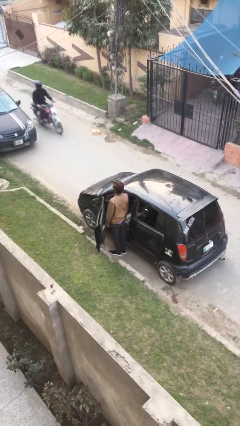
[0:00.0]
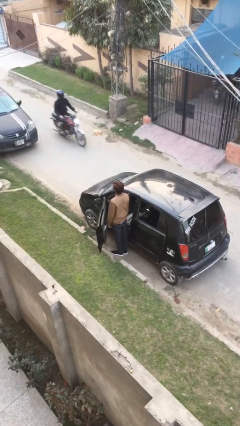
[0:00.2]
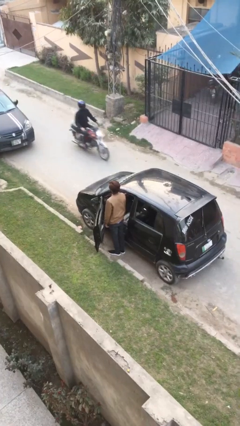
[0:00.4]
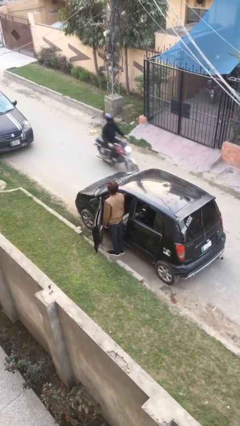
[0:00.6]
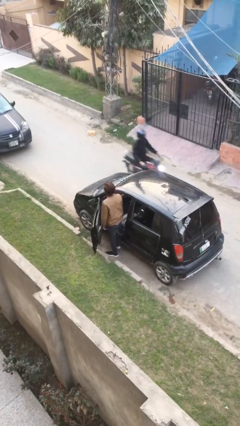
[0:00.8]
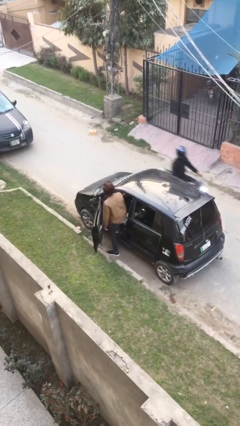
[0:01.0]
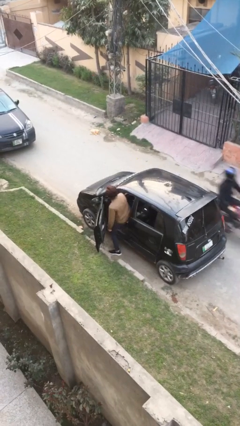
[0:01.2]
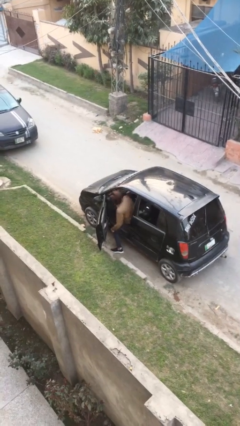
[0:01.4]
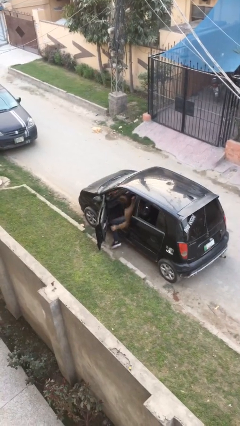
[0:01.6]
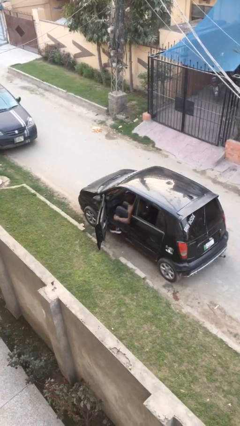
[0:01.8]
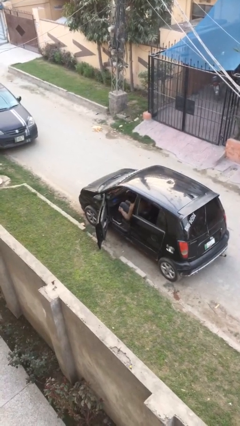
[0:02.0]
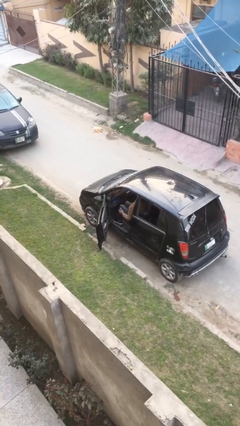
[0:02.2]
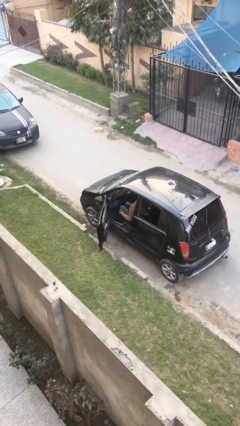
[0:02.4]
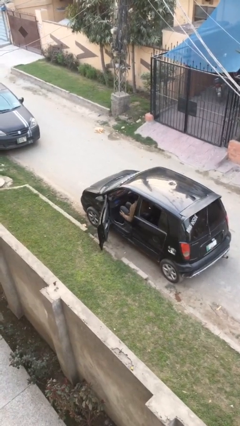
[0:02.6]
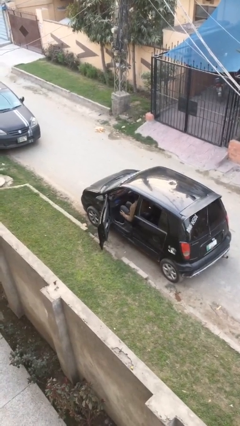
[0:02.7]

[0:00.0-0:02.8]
person enters car

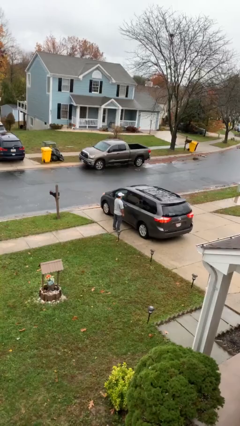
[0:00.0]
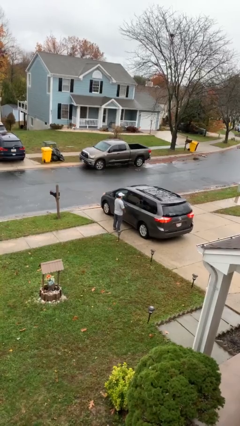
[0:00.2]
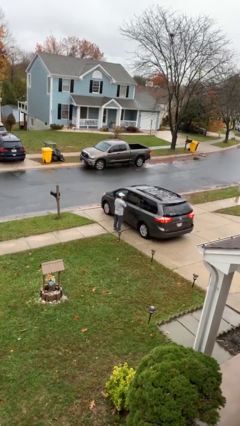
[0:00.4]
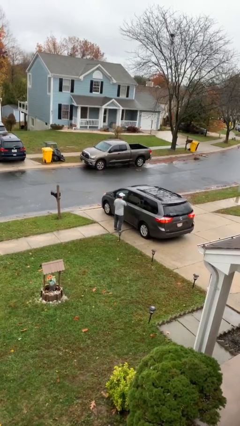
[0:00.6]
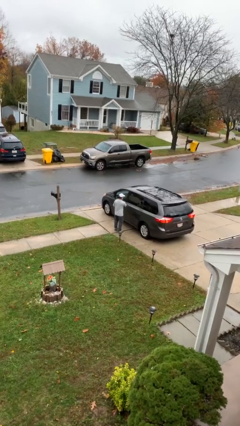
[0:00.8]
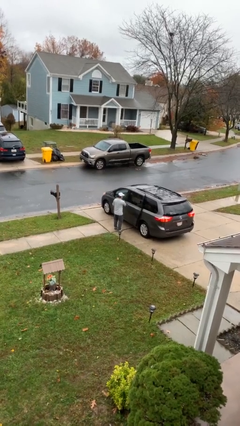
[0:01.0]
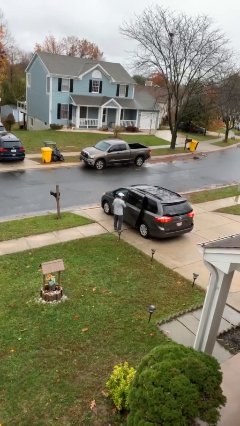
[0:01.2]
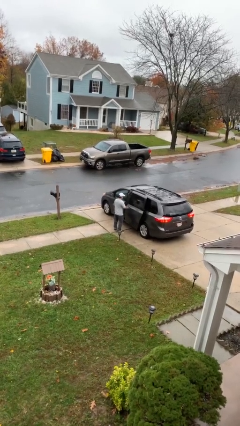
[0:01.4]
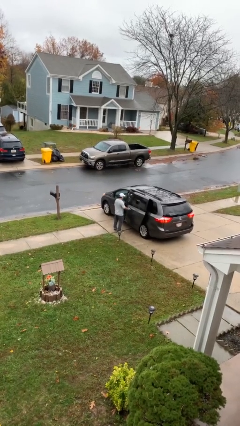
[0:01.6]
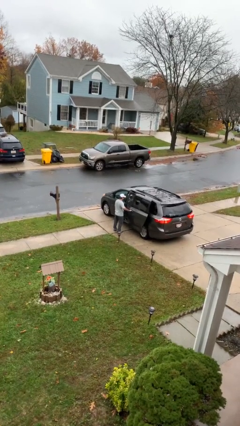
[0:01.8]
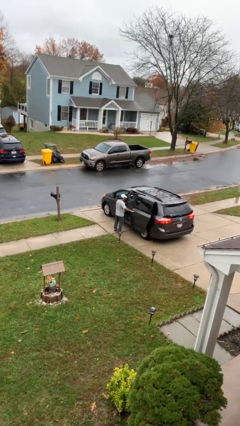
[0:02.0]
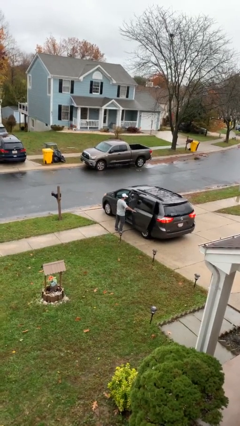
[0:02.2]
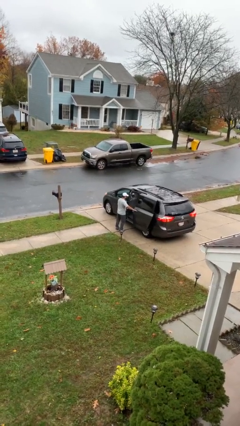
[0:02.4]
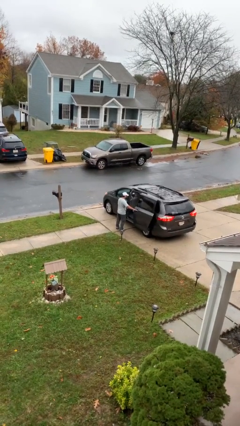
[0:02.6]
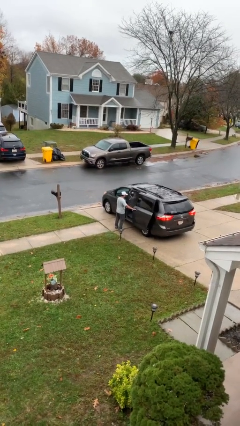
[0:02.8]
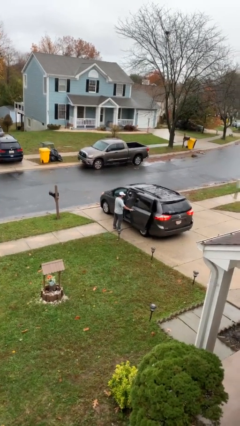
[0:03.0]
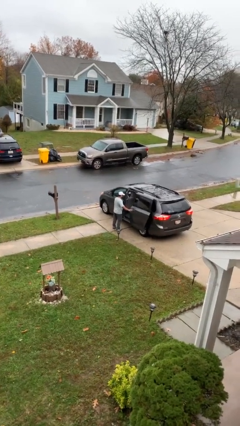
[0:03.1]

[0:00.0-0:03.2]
person opens car door

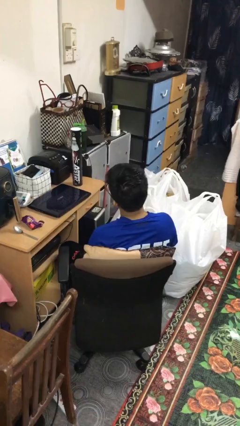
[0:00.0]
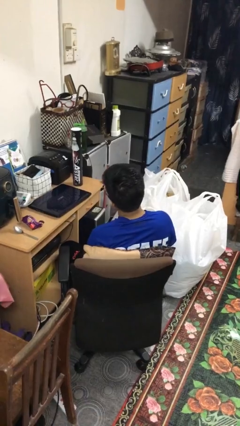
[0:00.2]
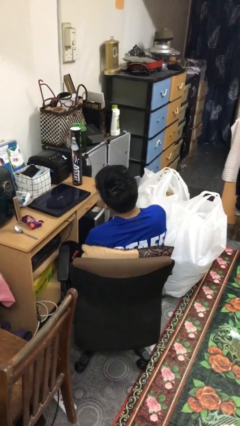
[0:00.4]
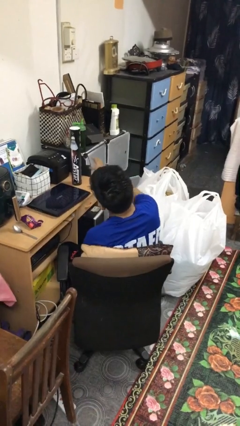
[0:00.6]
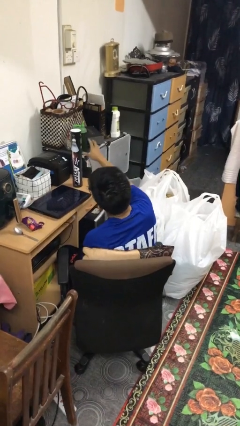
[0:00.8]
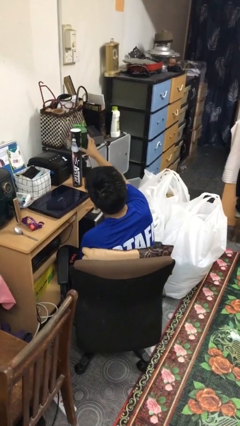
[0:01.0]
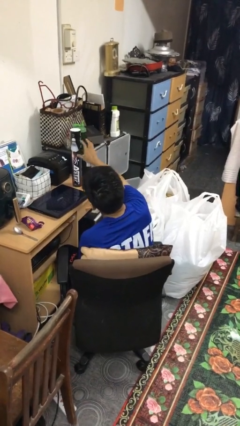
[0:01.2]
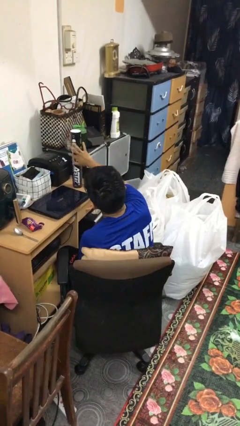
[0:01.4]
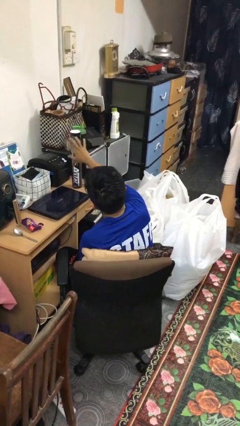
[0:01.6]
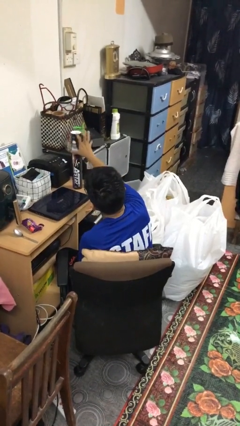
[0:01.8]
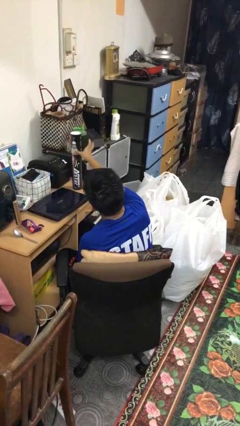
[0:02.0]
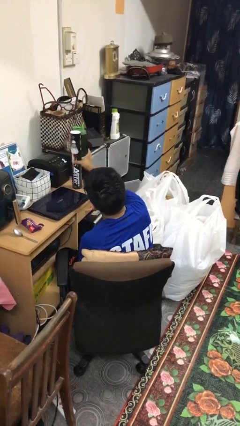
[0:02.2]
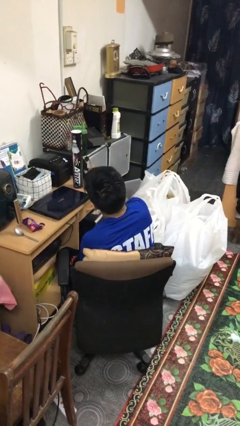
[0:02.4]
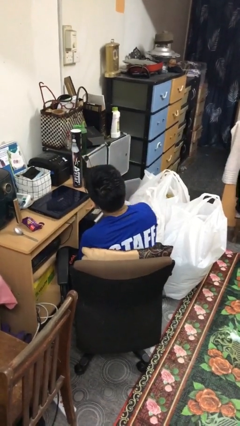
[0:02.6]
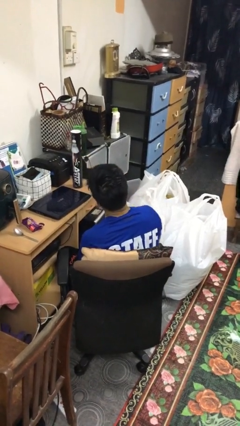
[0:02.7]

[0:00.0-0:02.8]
person waves hand over object

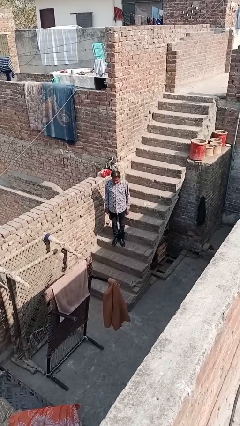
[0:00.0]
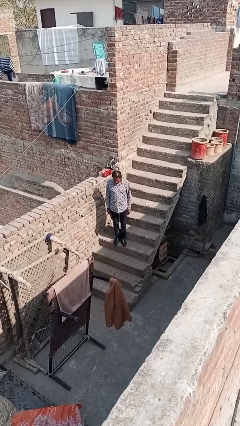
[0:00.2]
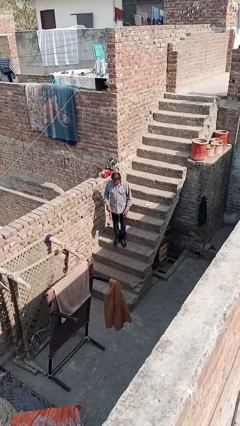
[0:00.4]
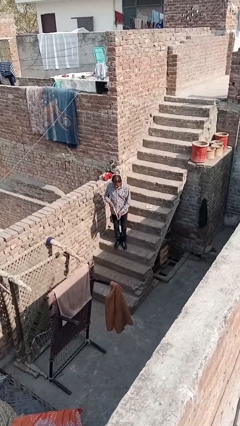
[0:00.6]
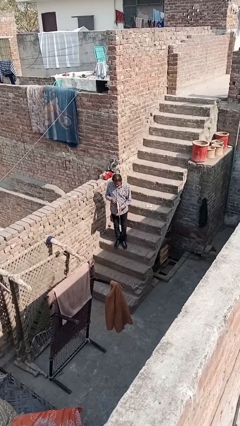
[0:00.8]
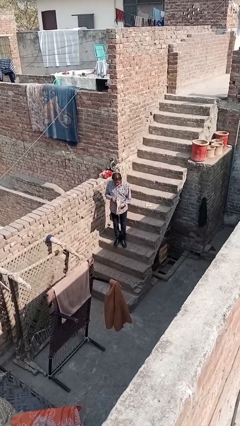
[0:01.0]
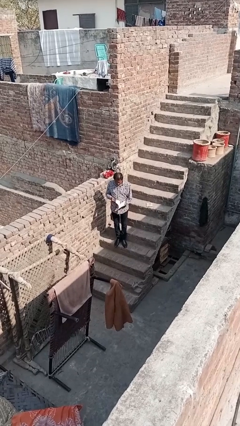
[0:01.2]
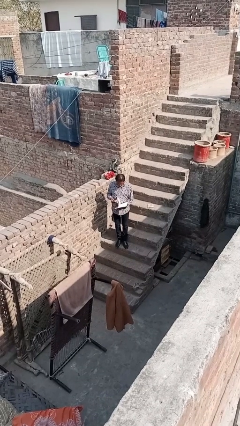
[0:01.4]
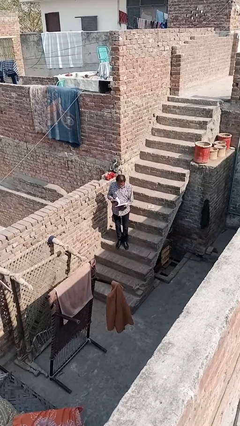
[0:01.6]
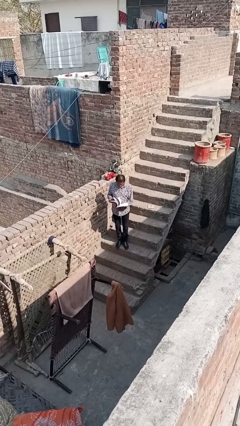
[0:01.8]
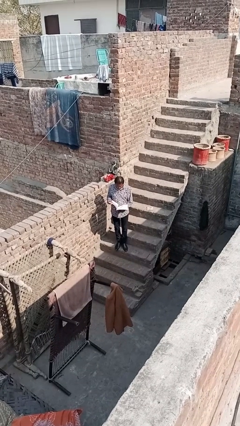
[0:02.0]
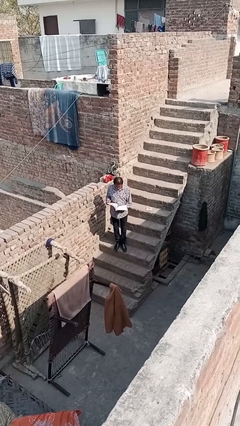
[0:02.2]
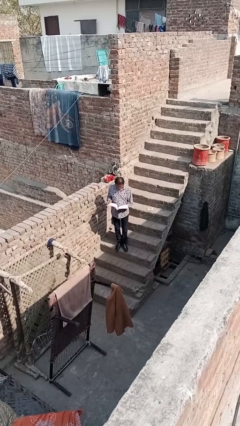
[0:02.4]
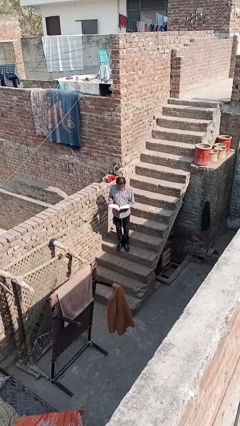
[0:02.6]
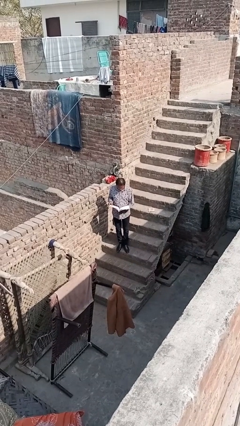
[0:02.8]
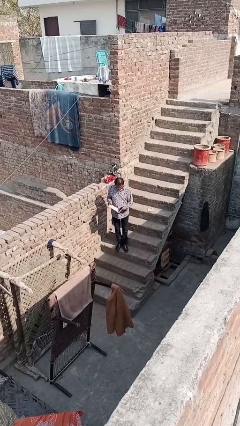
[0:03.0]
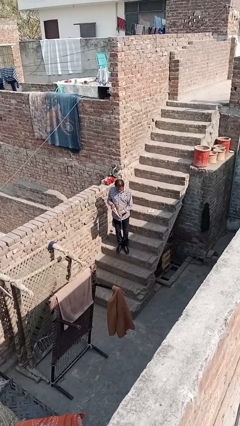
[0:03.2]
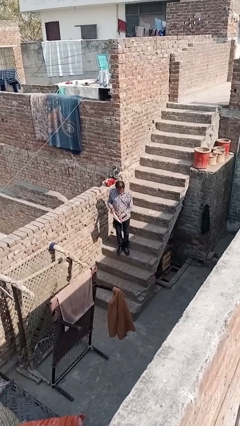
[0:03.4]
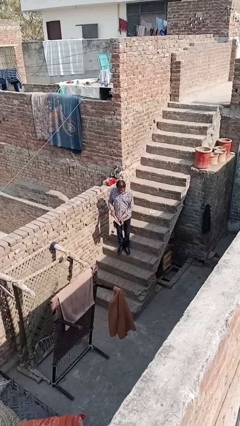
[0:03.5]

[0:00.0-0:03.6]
person reads document

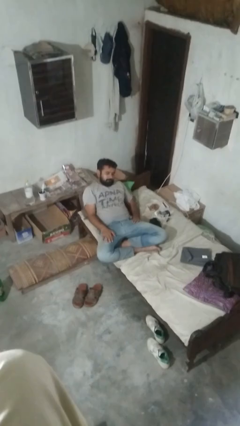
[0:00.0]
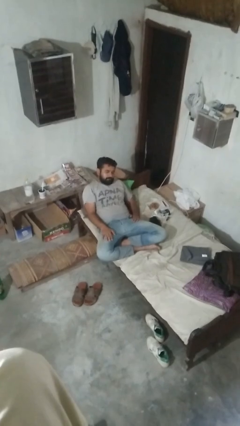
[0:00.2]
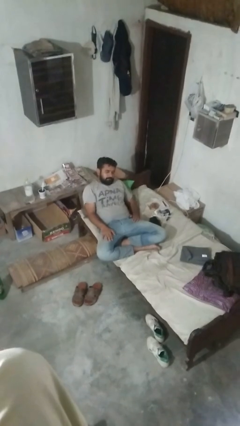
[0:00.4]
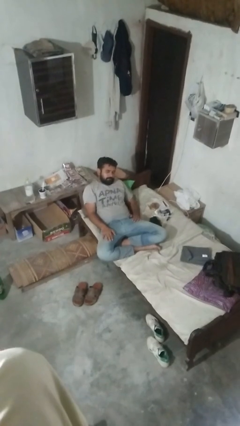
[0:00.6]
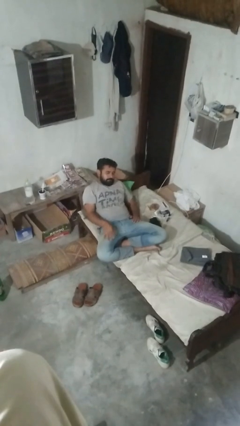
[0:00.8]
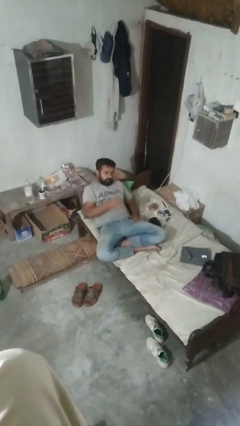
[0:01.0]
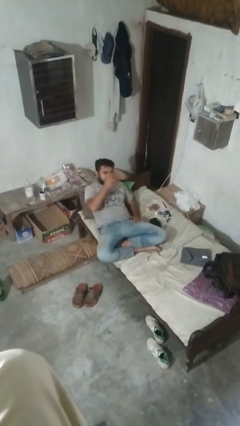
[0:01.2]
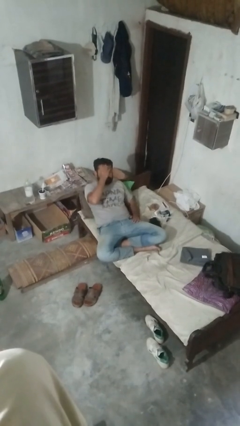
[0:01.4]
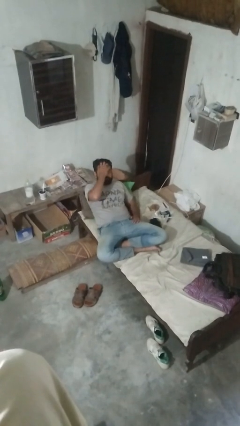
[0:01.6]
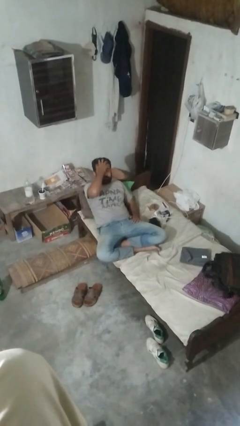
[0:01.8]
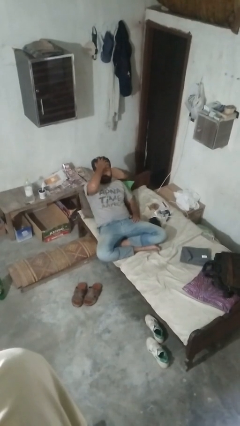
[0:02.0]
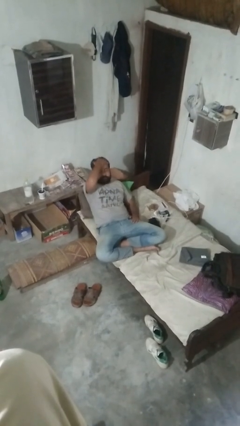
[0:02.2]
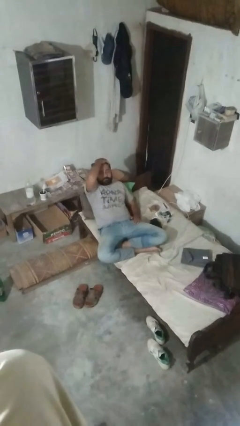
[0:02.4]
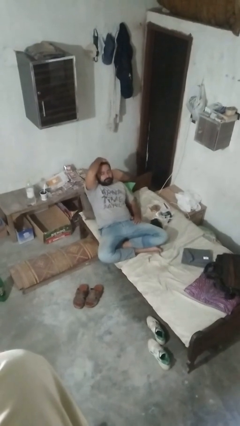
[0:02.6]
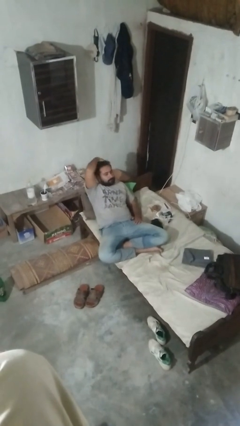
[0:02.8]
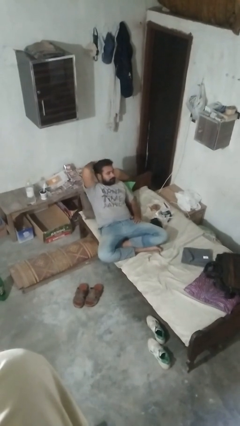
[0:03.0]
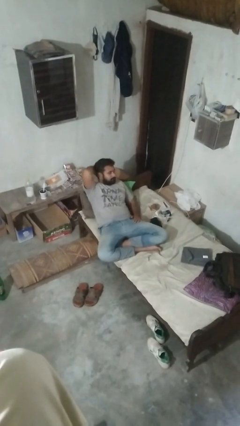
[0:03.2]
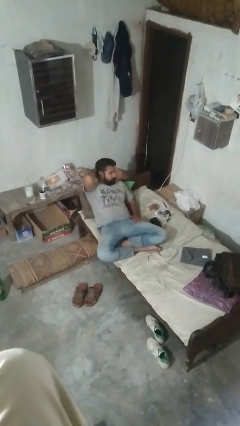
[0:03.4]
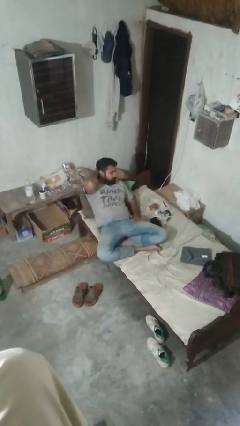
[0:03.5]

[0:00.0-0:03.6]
person strokes hair

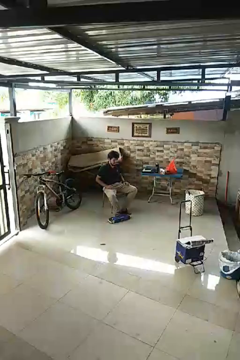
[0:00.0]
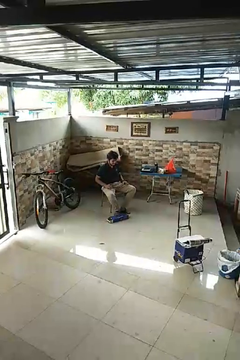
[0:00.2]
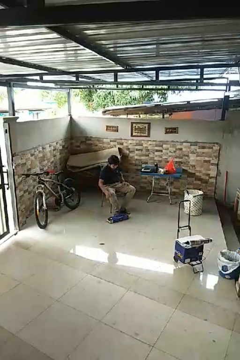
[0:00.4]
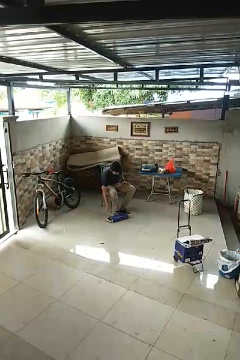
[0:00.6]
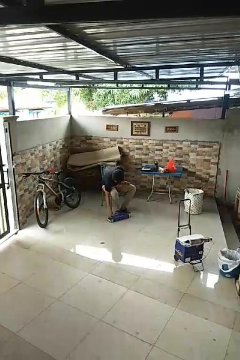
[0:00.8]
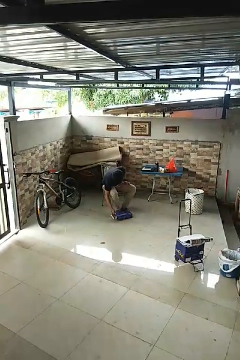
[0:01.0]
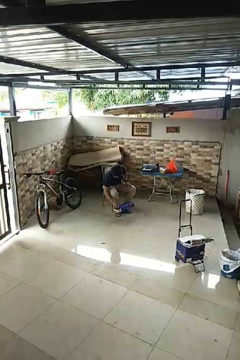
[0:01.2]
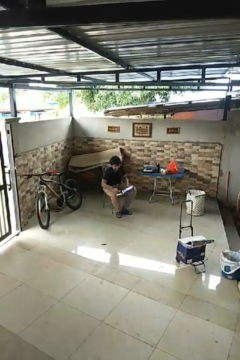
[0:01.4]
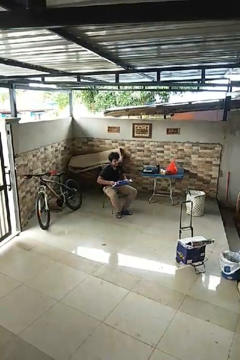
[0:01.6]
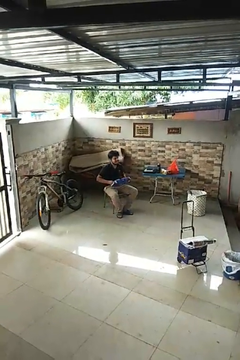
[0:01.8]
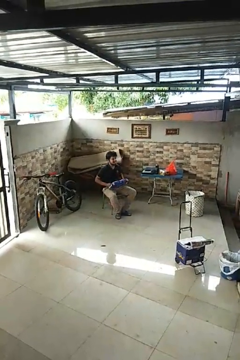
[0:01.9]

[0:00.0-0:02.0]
person picks up object from floor
